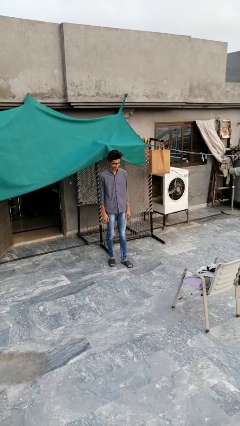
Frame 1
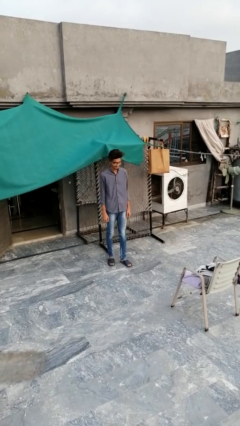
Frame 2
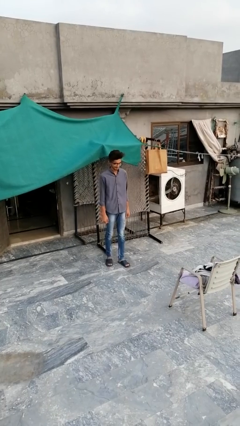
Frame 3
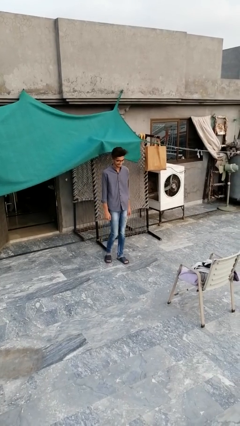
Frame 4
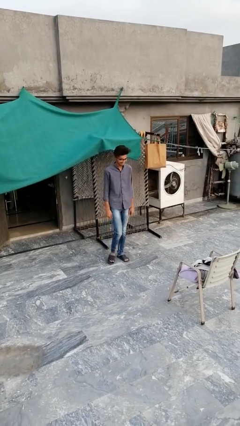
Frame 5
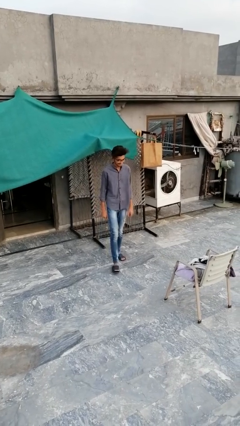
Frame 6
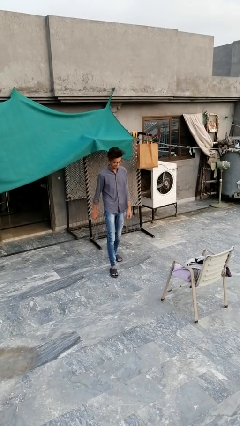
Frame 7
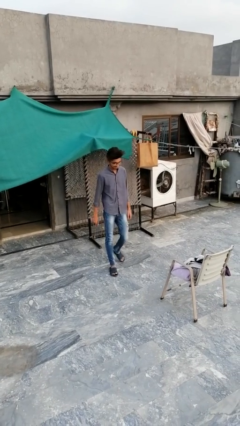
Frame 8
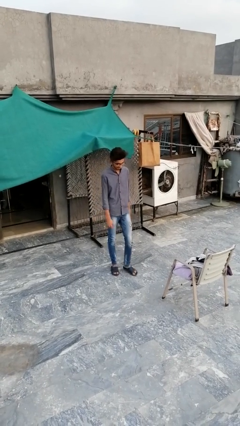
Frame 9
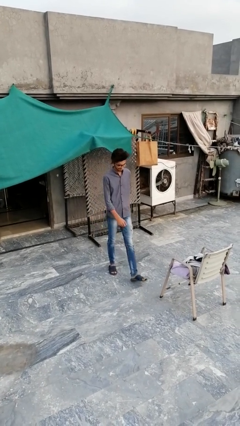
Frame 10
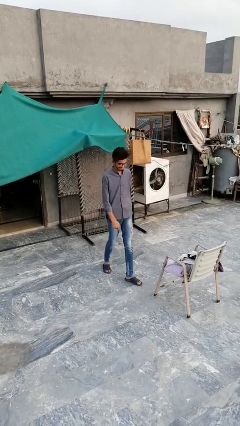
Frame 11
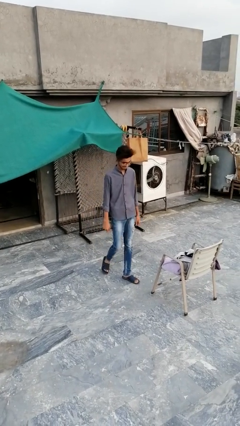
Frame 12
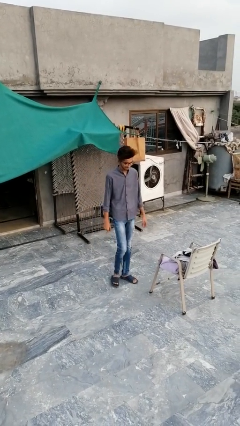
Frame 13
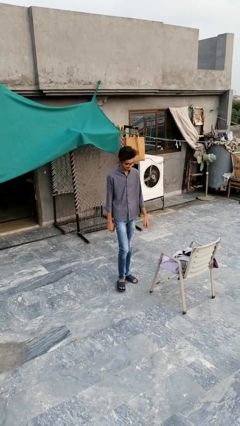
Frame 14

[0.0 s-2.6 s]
person trips on object on floor

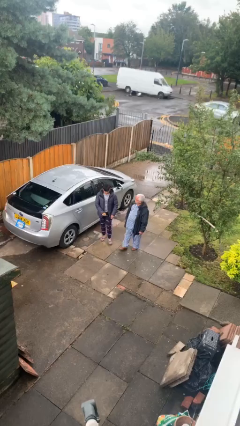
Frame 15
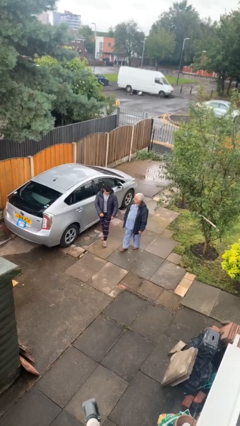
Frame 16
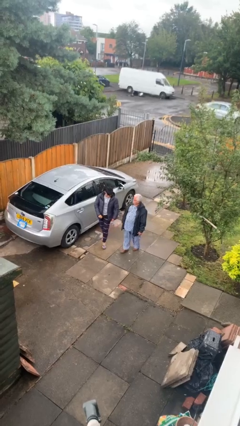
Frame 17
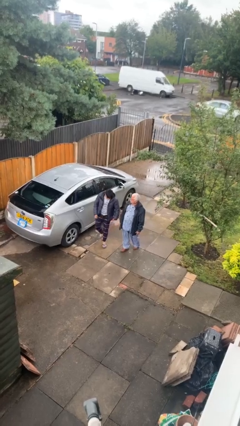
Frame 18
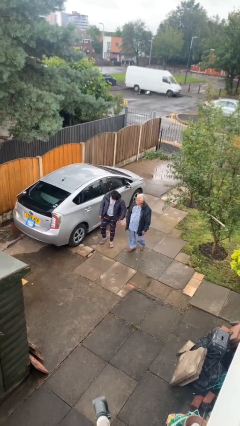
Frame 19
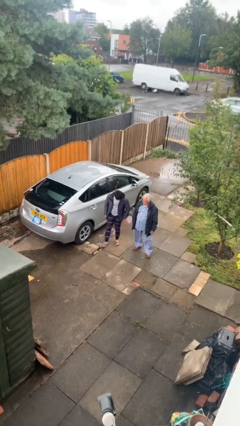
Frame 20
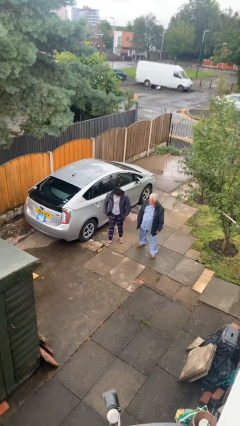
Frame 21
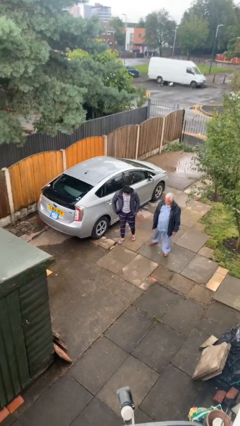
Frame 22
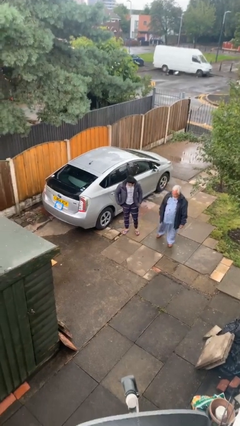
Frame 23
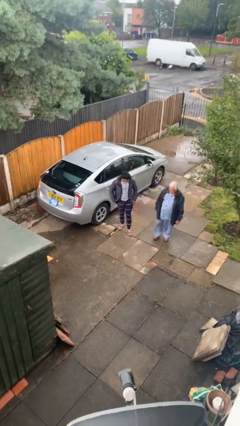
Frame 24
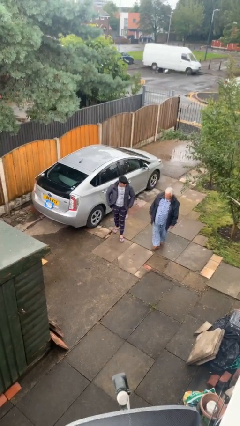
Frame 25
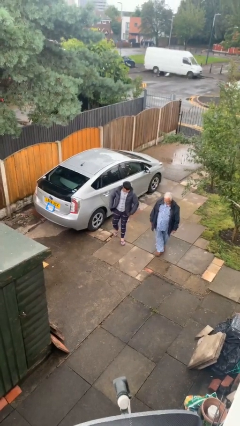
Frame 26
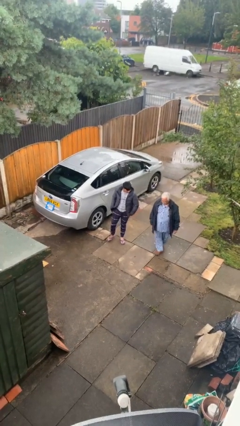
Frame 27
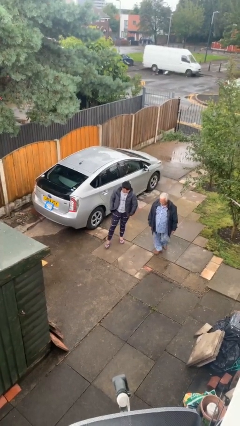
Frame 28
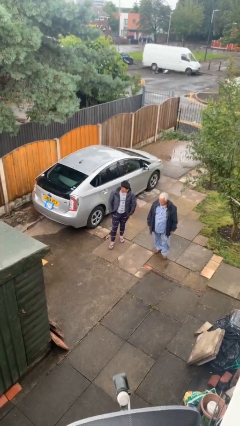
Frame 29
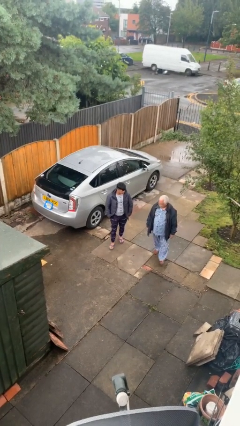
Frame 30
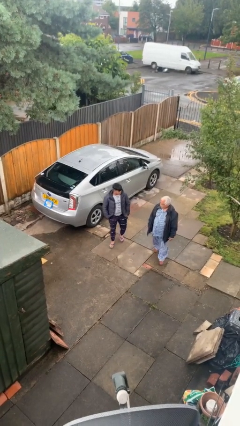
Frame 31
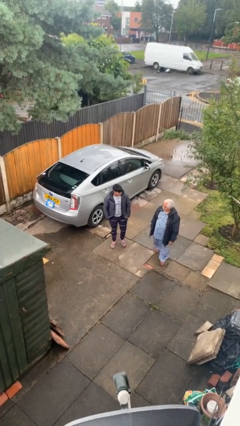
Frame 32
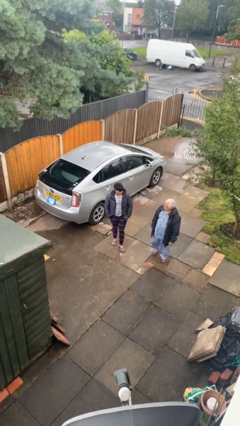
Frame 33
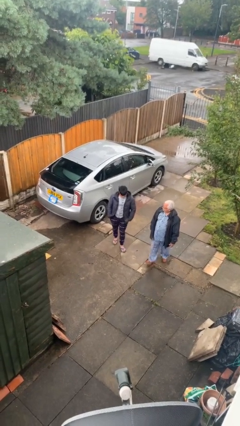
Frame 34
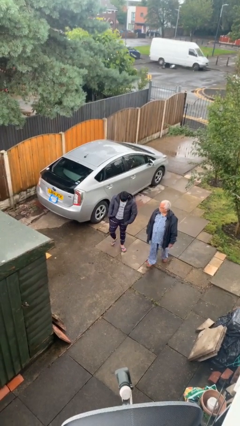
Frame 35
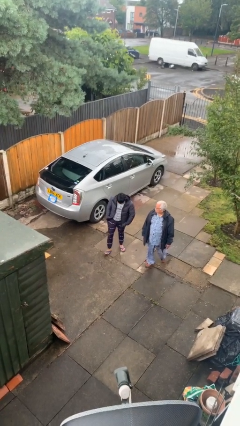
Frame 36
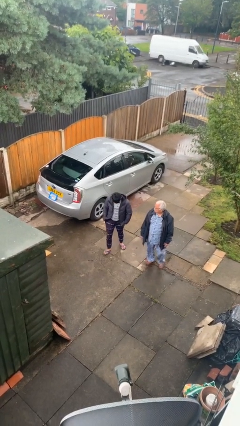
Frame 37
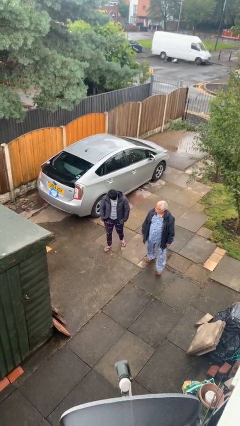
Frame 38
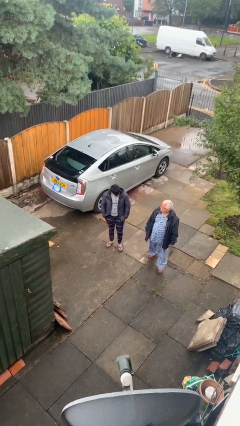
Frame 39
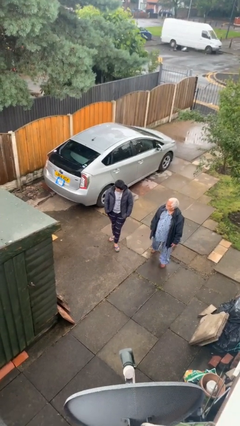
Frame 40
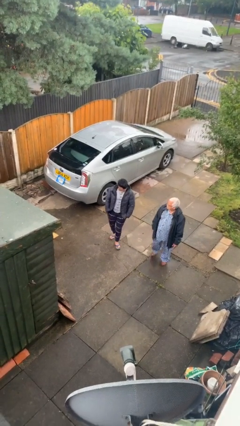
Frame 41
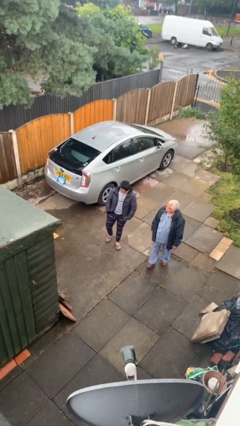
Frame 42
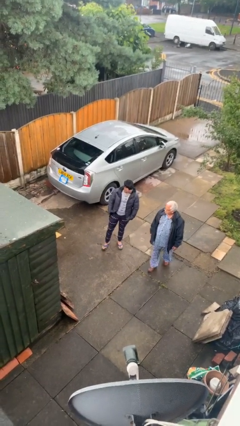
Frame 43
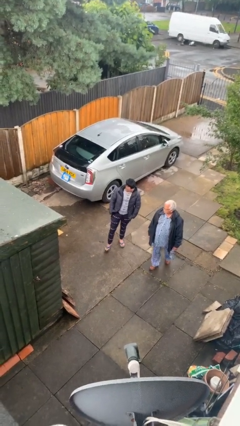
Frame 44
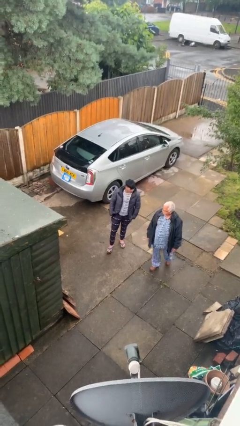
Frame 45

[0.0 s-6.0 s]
person talks to person

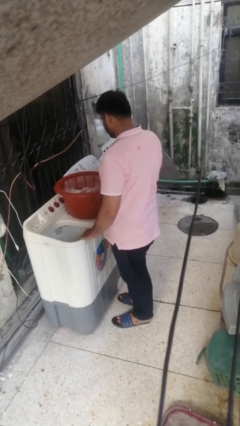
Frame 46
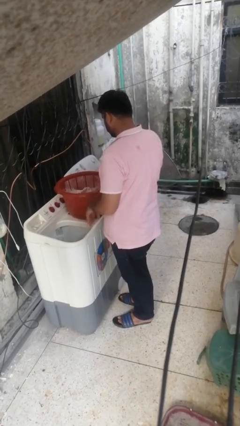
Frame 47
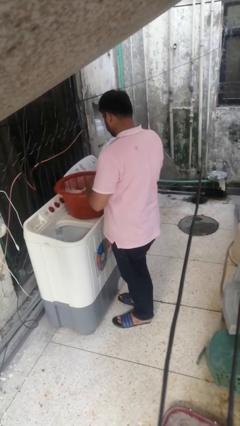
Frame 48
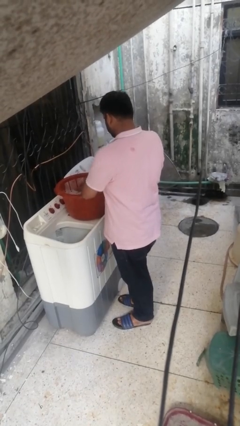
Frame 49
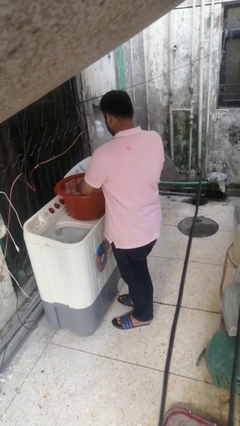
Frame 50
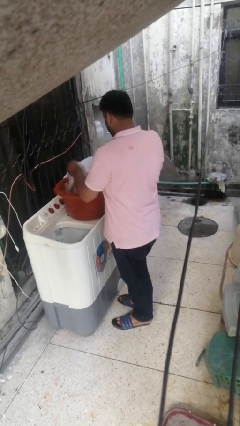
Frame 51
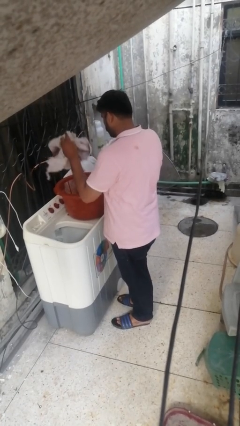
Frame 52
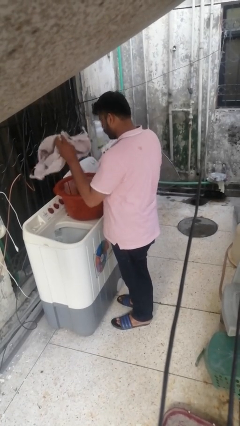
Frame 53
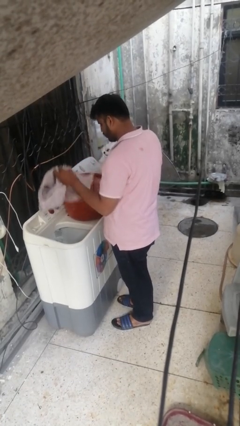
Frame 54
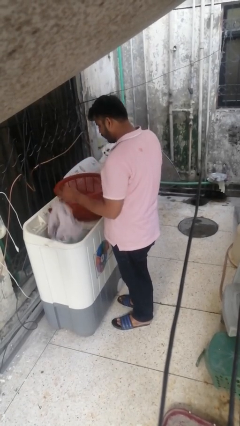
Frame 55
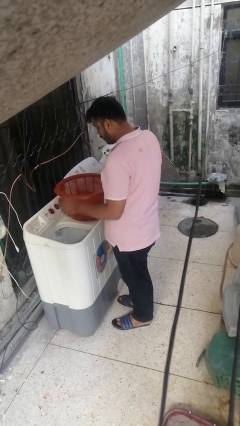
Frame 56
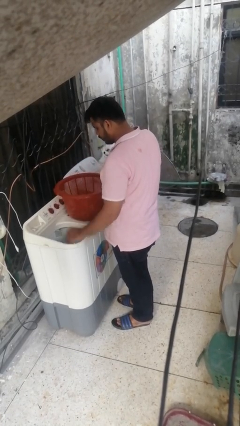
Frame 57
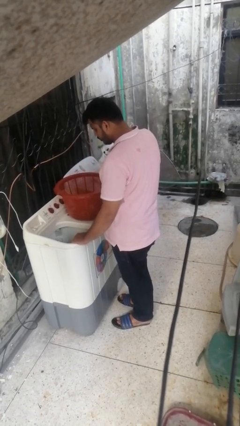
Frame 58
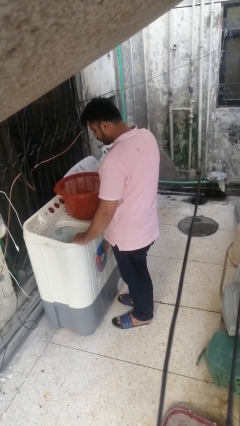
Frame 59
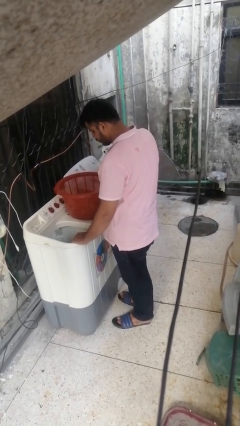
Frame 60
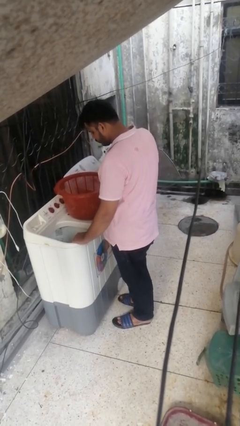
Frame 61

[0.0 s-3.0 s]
person loads clotheswasher

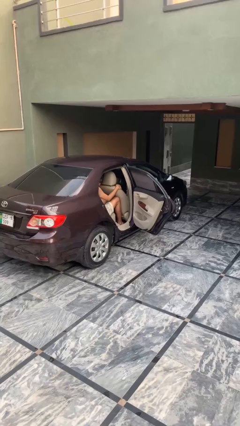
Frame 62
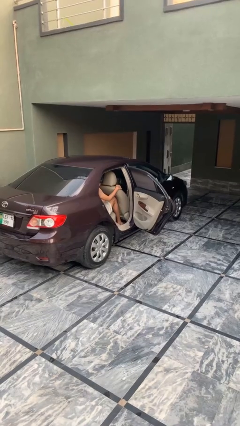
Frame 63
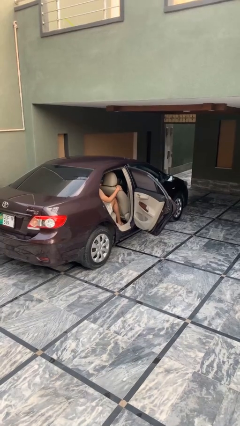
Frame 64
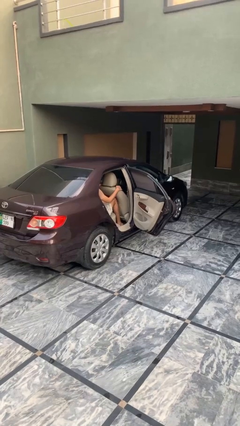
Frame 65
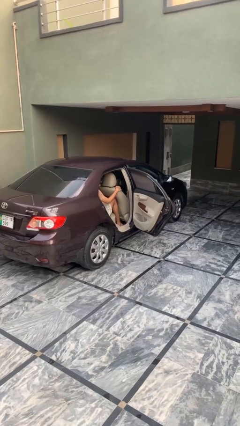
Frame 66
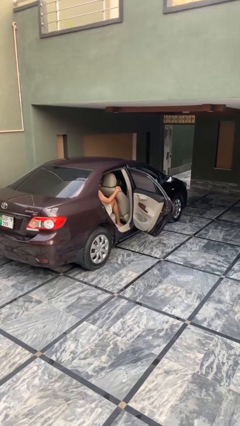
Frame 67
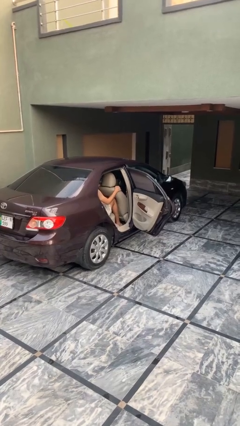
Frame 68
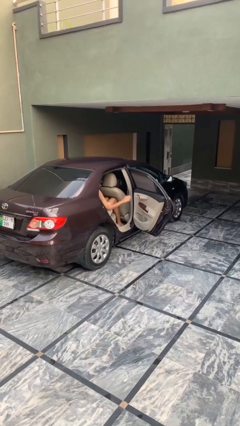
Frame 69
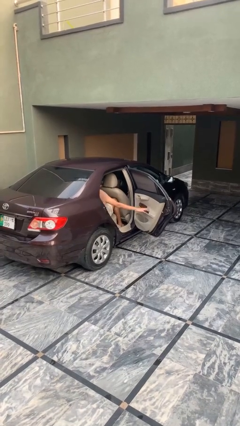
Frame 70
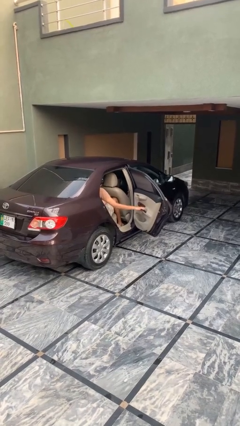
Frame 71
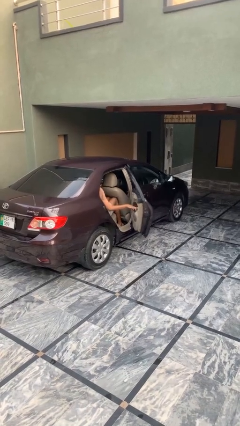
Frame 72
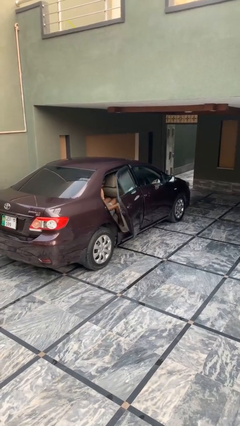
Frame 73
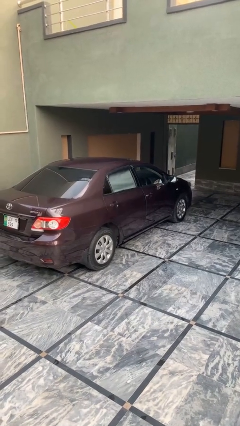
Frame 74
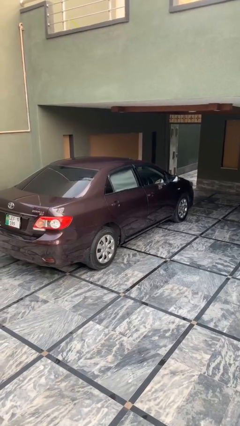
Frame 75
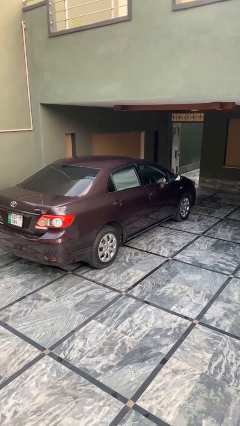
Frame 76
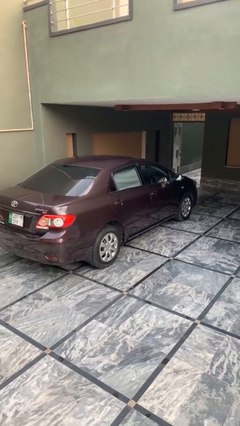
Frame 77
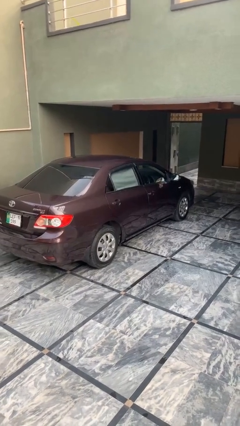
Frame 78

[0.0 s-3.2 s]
person closes car door

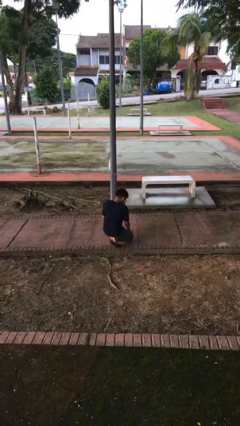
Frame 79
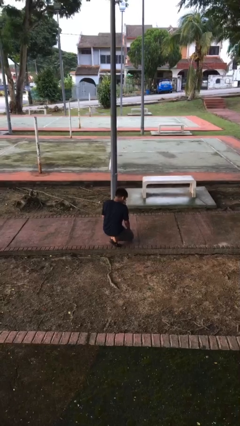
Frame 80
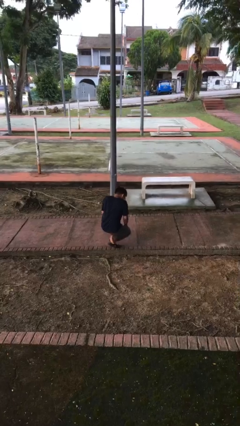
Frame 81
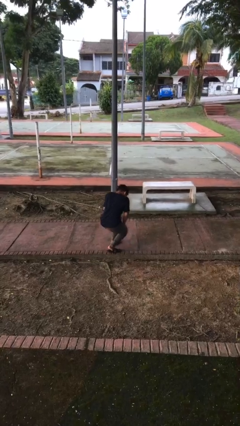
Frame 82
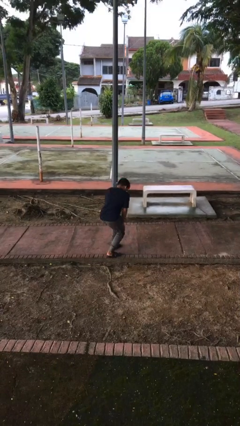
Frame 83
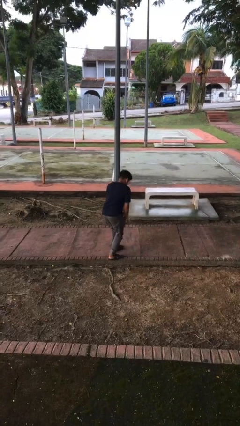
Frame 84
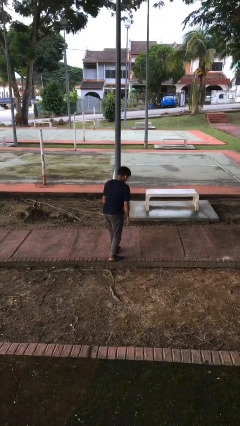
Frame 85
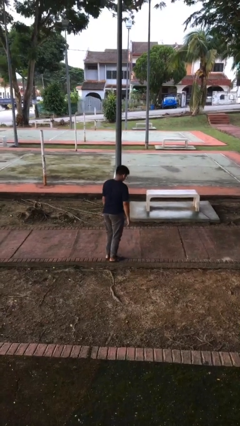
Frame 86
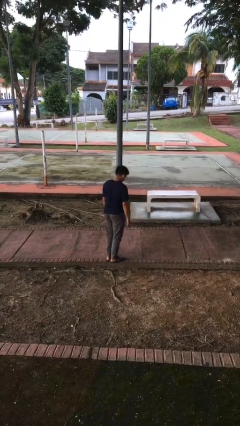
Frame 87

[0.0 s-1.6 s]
person stands up from floor

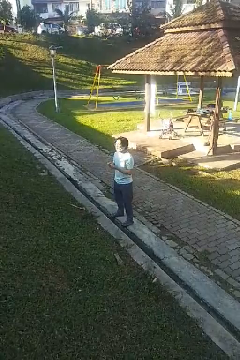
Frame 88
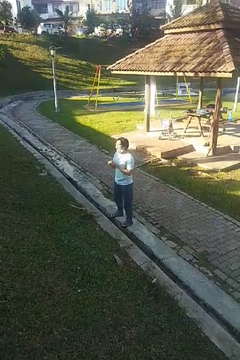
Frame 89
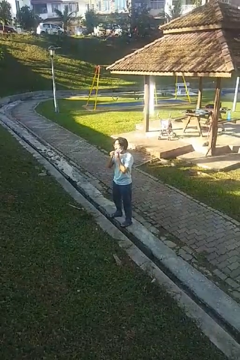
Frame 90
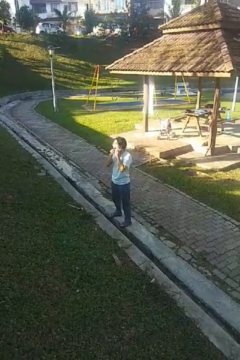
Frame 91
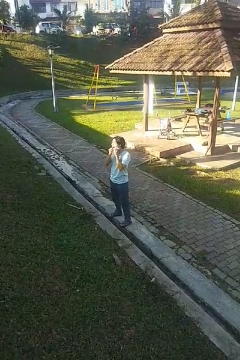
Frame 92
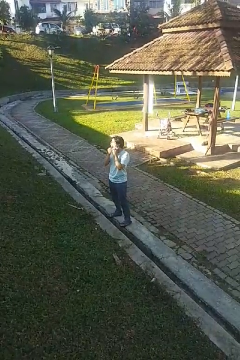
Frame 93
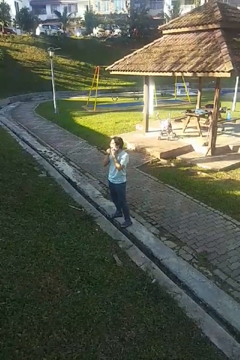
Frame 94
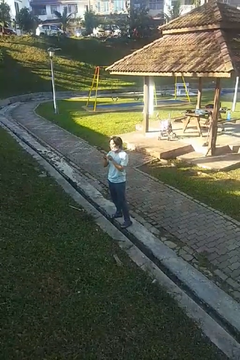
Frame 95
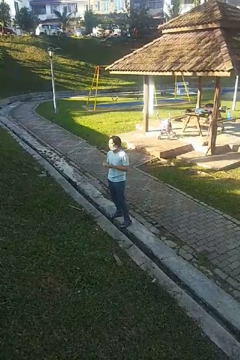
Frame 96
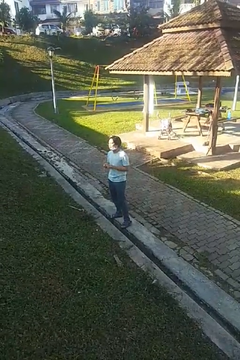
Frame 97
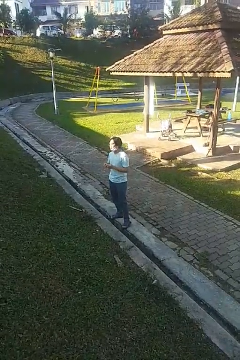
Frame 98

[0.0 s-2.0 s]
person flosses
